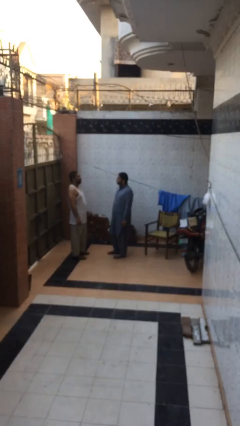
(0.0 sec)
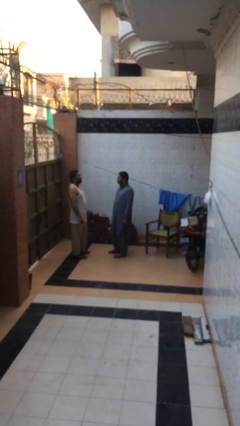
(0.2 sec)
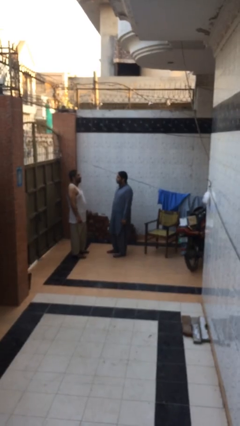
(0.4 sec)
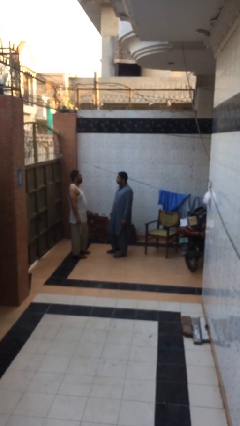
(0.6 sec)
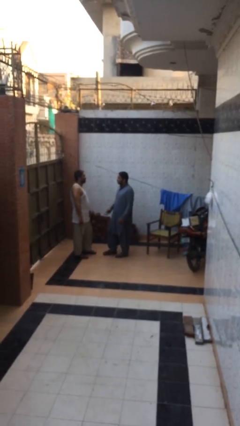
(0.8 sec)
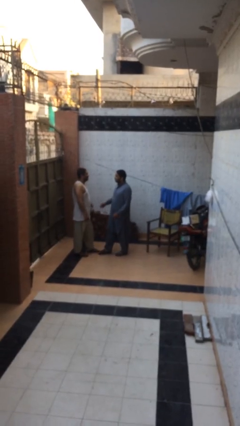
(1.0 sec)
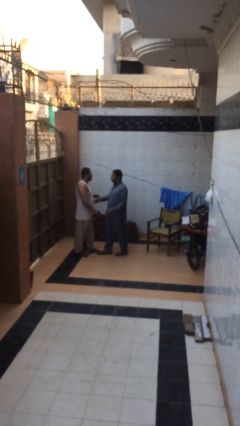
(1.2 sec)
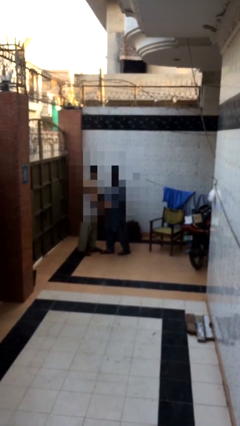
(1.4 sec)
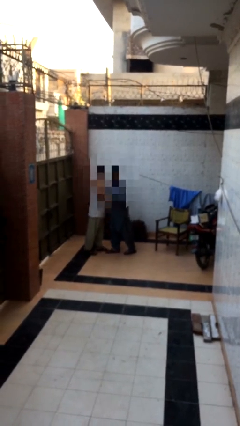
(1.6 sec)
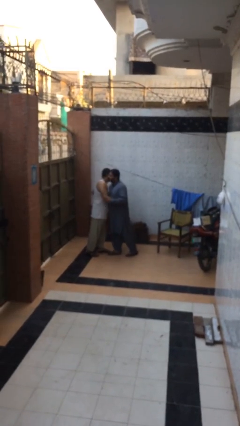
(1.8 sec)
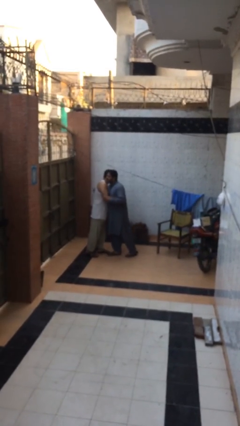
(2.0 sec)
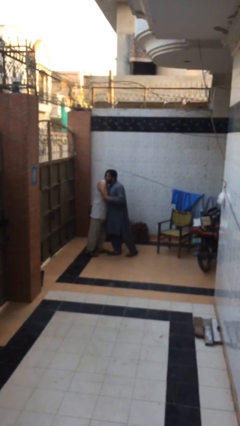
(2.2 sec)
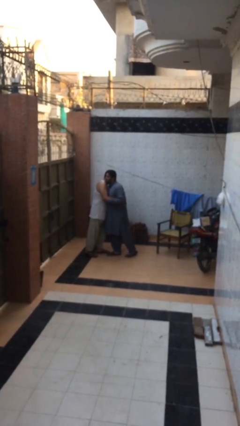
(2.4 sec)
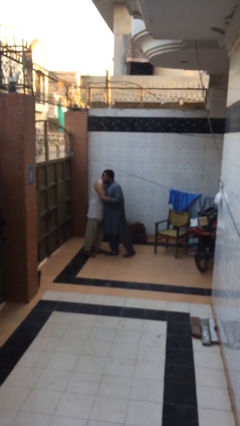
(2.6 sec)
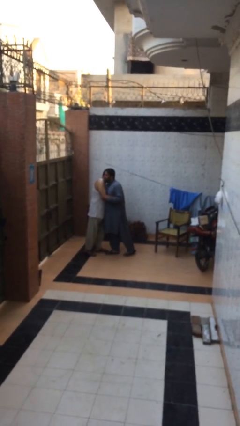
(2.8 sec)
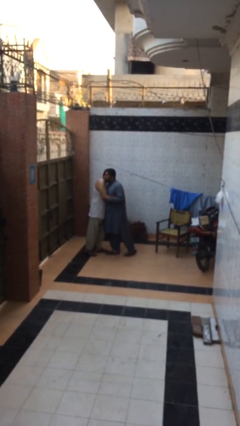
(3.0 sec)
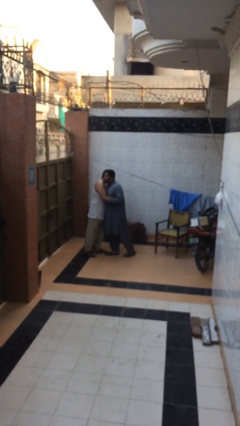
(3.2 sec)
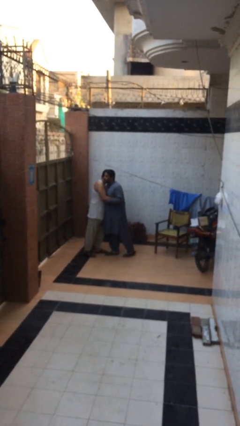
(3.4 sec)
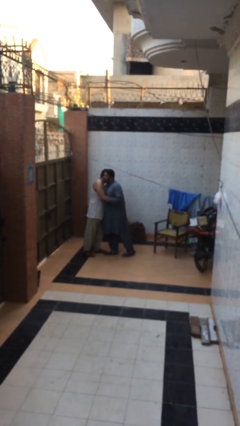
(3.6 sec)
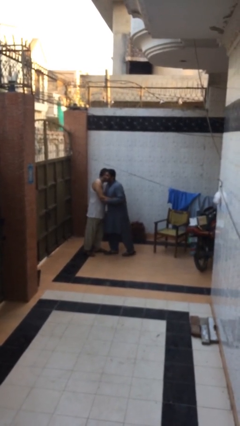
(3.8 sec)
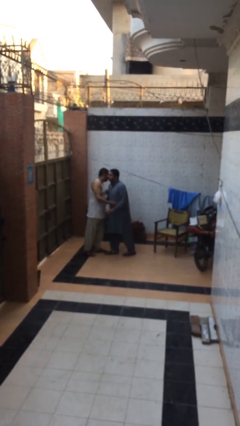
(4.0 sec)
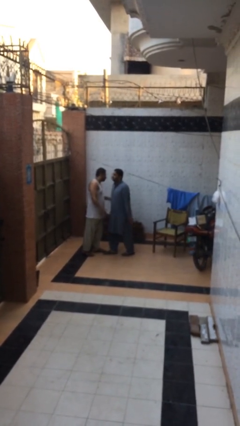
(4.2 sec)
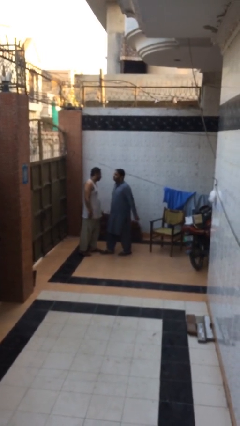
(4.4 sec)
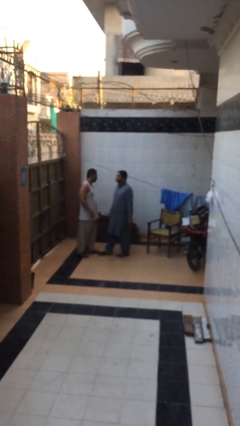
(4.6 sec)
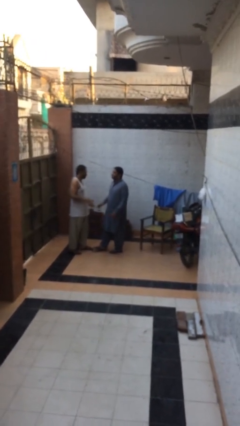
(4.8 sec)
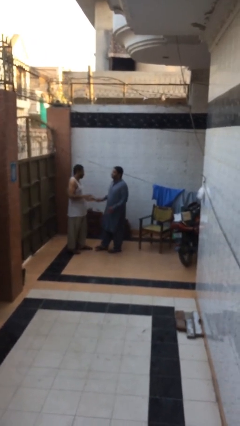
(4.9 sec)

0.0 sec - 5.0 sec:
person embraces person

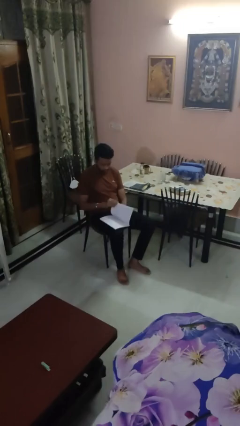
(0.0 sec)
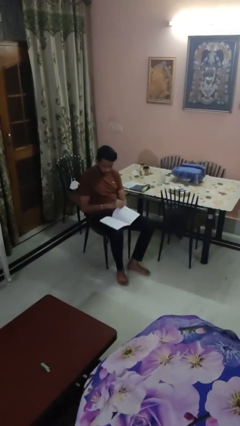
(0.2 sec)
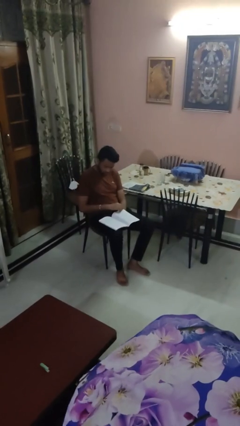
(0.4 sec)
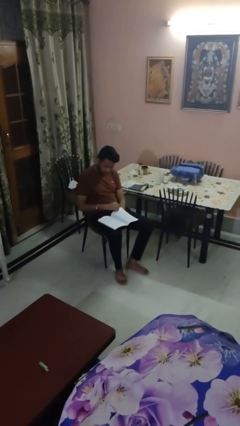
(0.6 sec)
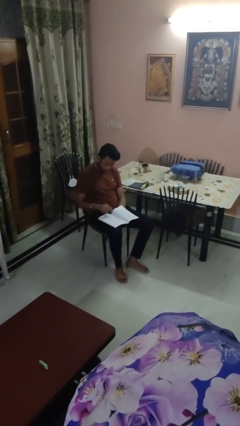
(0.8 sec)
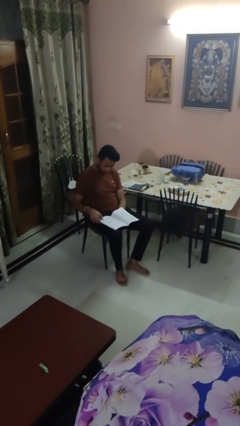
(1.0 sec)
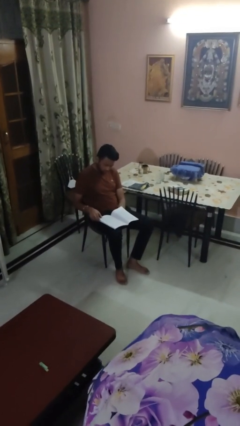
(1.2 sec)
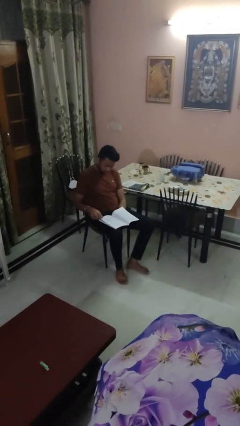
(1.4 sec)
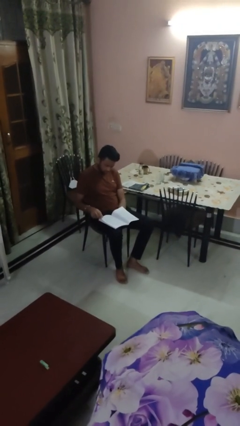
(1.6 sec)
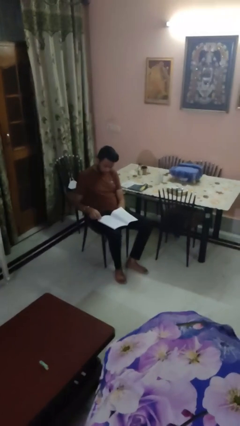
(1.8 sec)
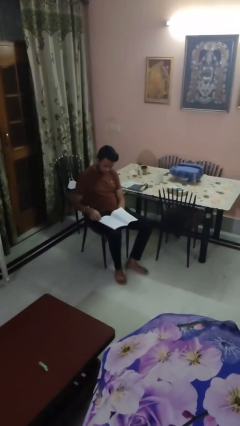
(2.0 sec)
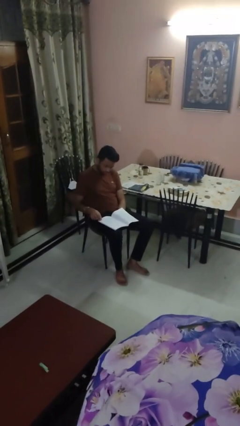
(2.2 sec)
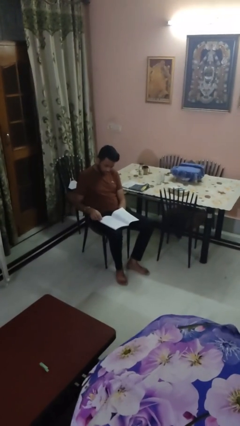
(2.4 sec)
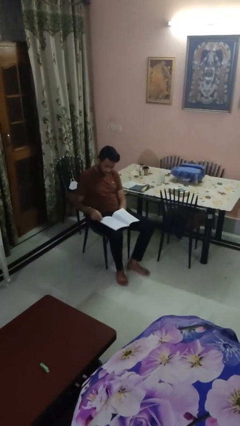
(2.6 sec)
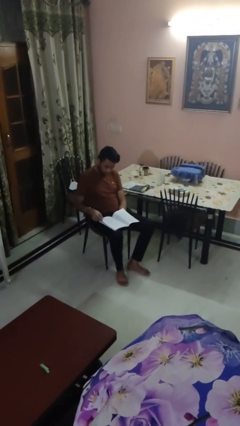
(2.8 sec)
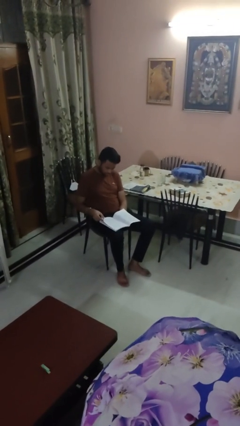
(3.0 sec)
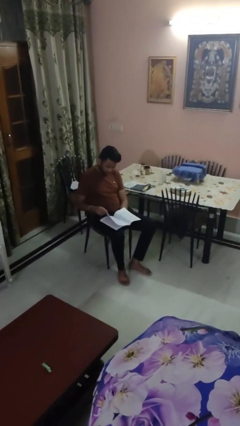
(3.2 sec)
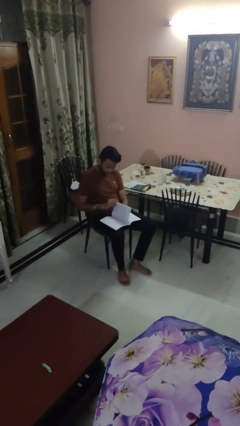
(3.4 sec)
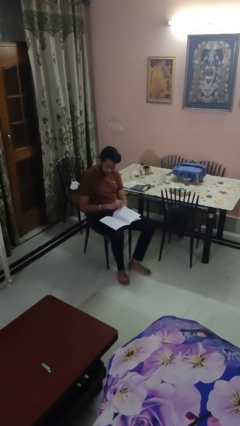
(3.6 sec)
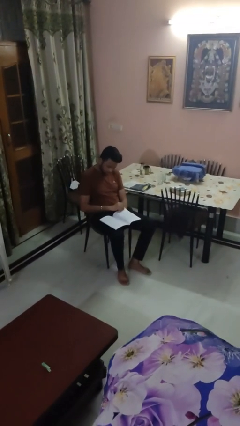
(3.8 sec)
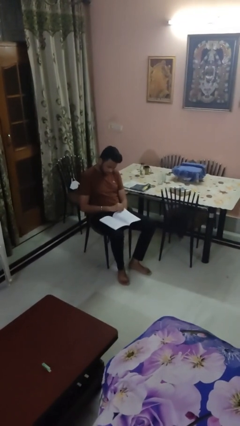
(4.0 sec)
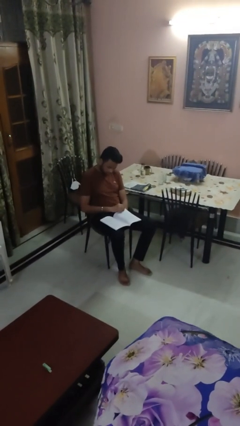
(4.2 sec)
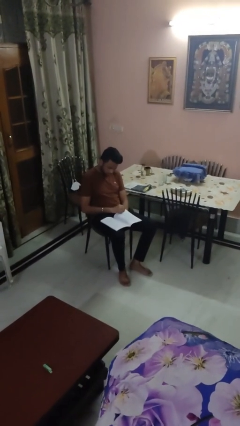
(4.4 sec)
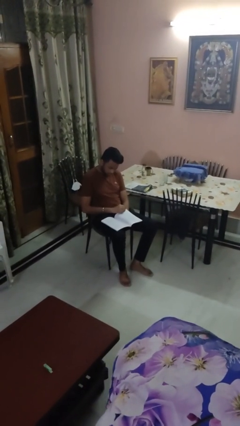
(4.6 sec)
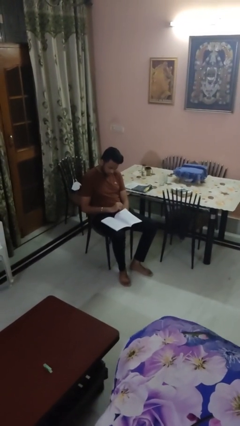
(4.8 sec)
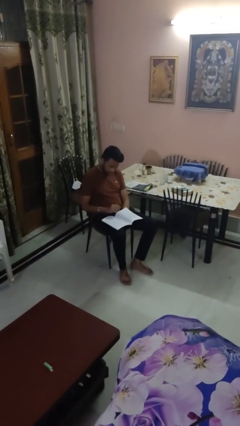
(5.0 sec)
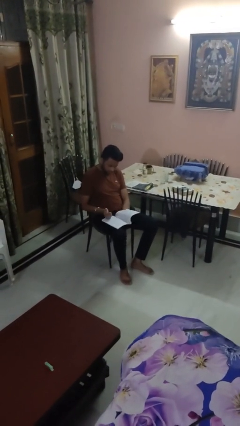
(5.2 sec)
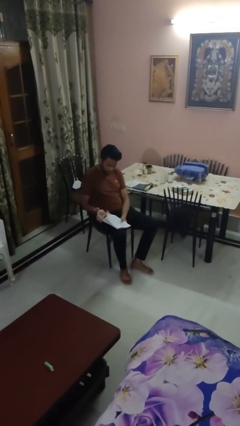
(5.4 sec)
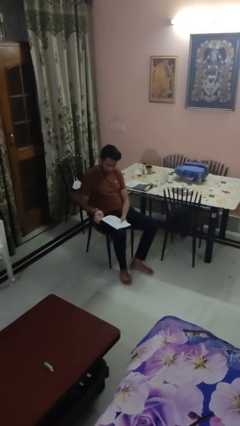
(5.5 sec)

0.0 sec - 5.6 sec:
person reads magazine

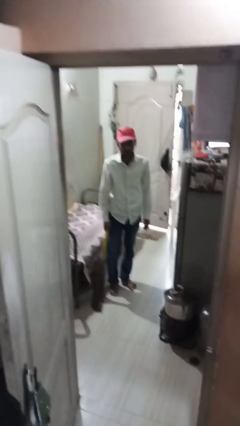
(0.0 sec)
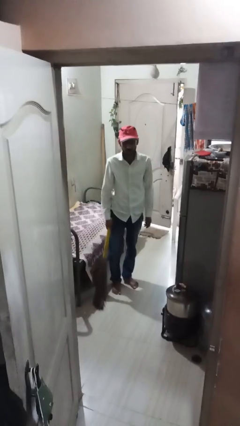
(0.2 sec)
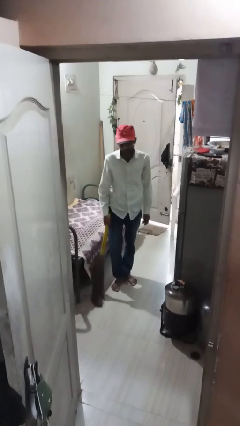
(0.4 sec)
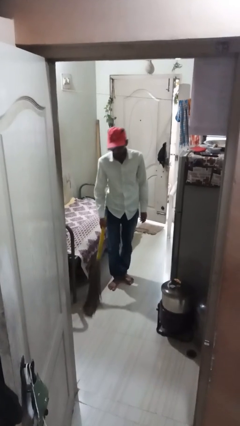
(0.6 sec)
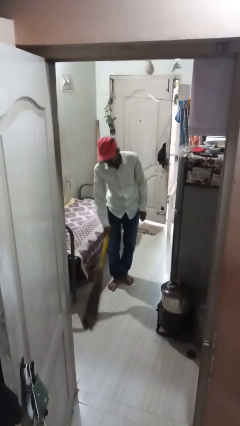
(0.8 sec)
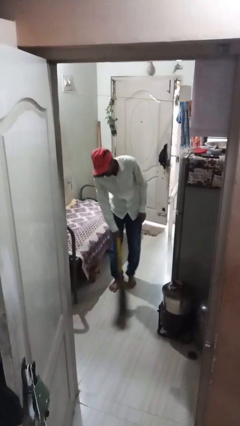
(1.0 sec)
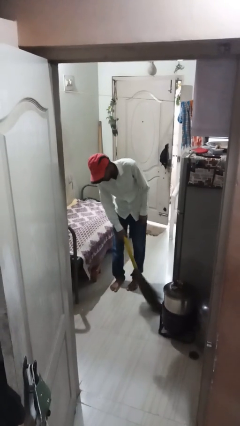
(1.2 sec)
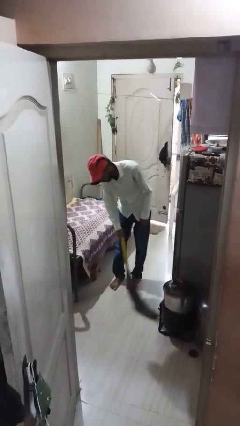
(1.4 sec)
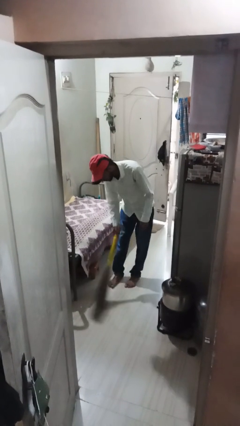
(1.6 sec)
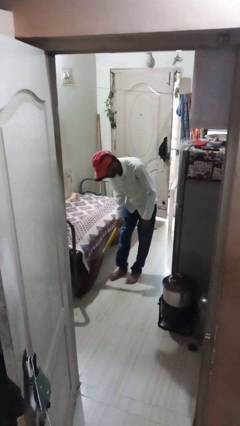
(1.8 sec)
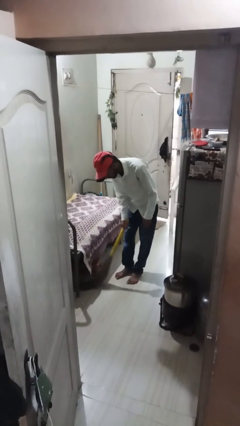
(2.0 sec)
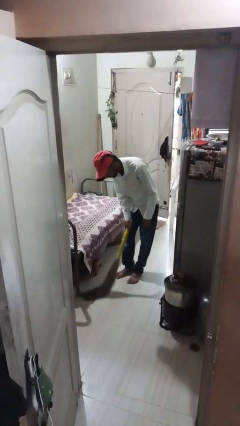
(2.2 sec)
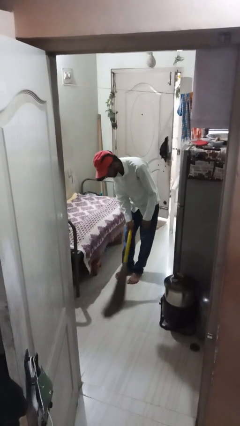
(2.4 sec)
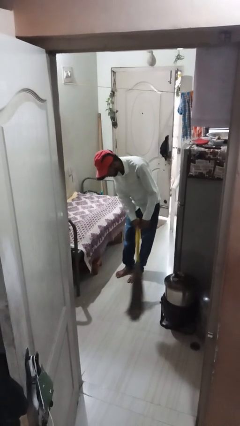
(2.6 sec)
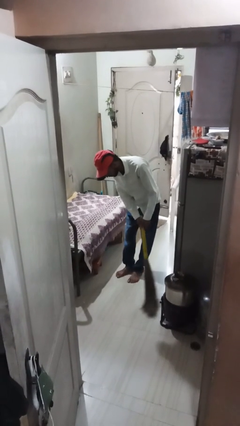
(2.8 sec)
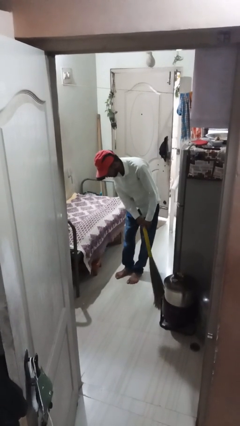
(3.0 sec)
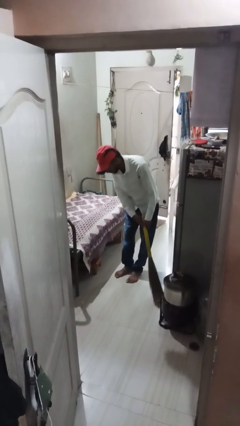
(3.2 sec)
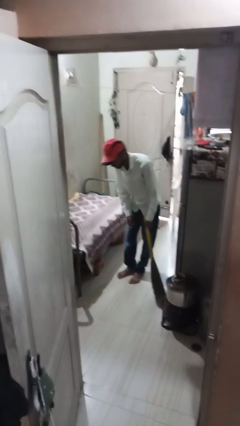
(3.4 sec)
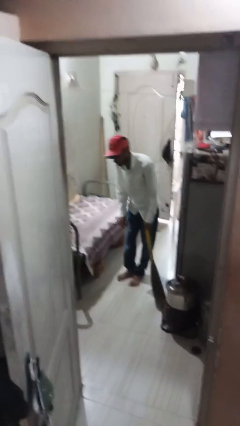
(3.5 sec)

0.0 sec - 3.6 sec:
person sweeps floor

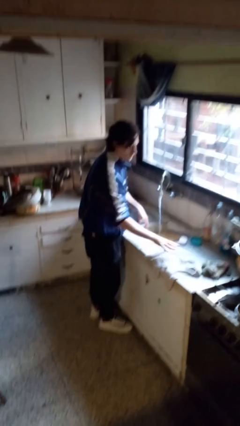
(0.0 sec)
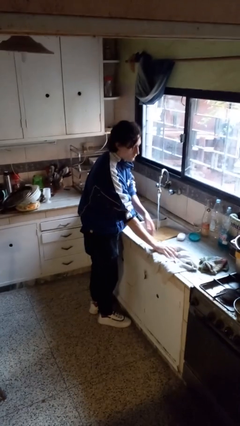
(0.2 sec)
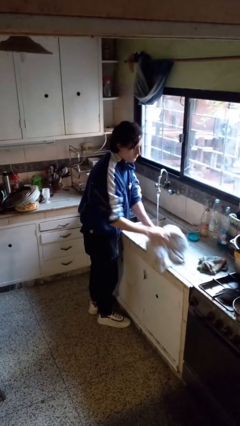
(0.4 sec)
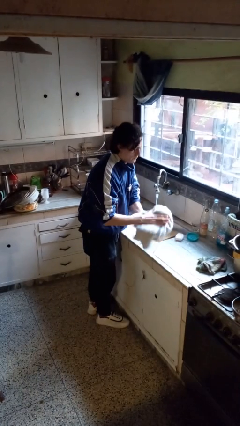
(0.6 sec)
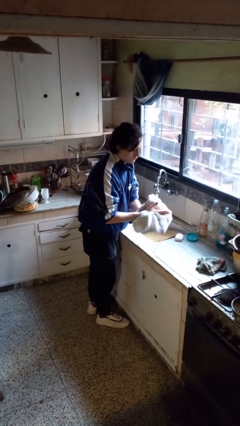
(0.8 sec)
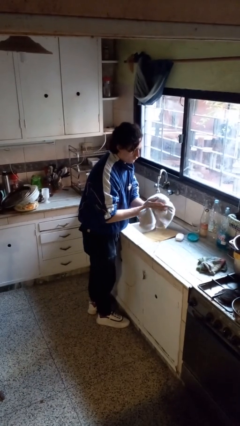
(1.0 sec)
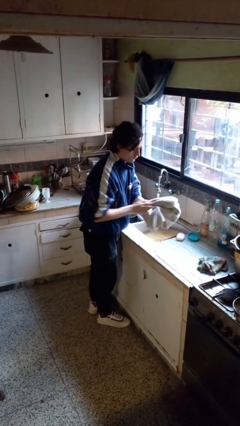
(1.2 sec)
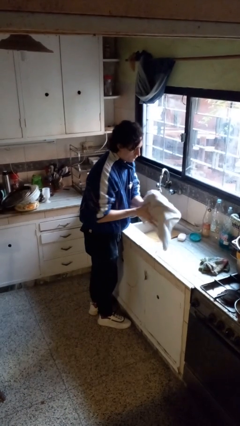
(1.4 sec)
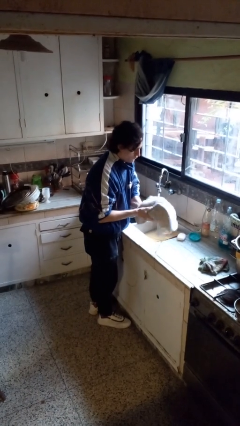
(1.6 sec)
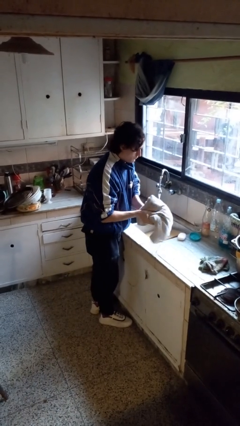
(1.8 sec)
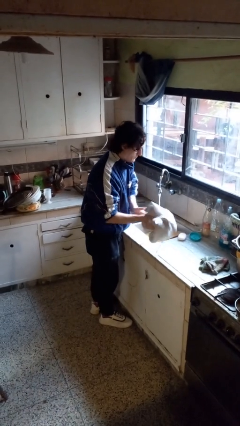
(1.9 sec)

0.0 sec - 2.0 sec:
person dries hands with towel

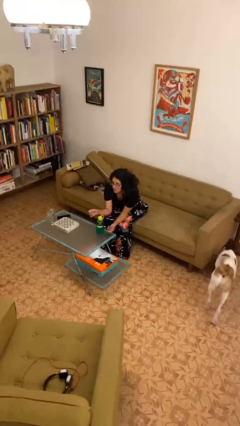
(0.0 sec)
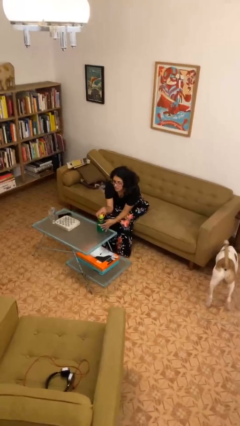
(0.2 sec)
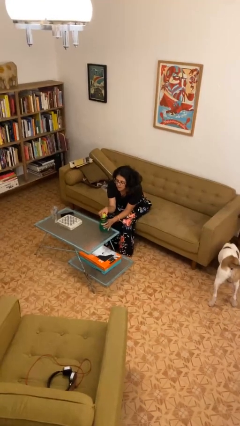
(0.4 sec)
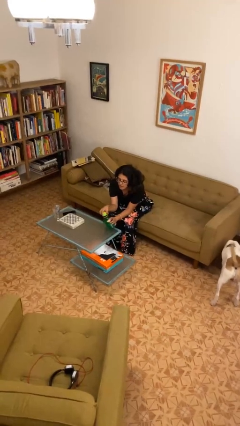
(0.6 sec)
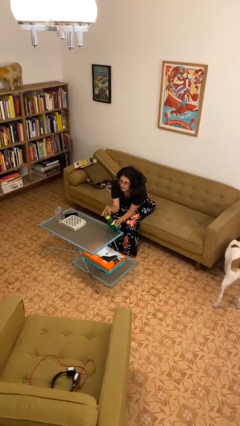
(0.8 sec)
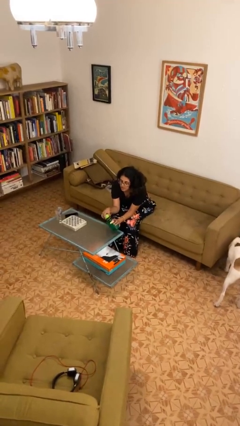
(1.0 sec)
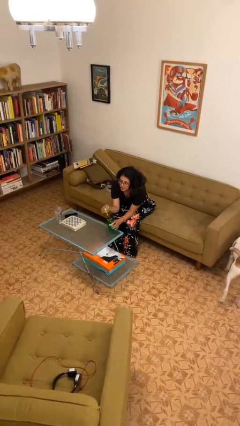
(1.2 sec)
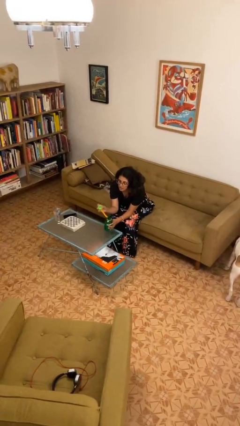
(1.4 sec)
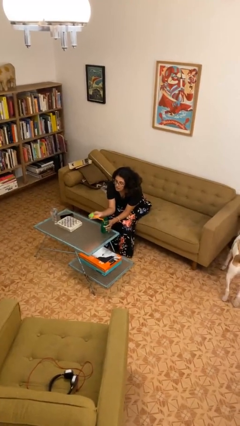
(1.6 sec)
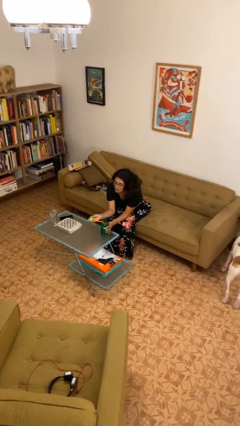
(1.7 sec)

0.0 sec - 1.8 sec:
person unscrews lid from bottle
